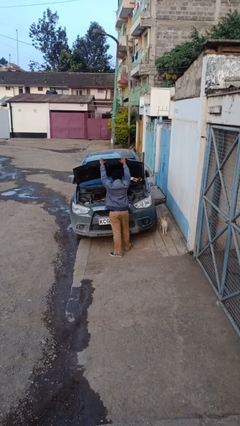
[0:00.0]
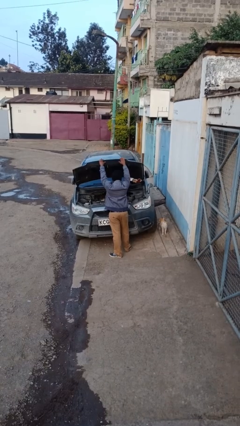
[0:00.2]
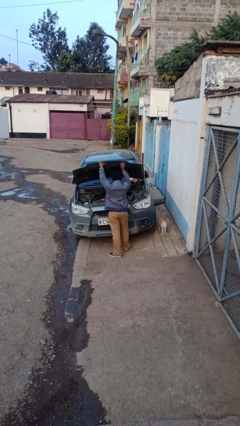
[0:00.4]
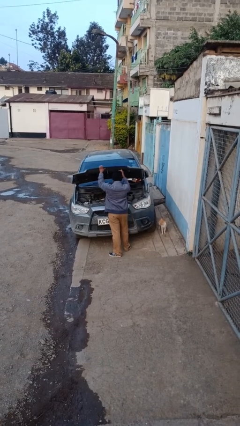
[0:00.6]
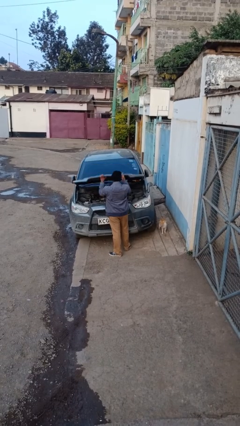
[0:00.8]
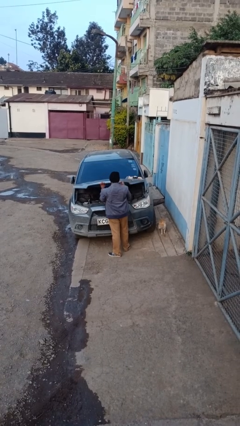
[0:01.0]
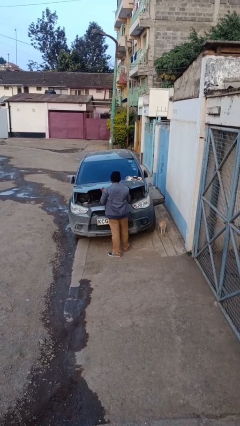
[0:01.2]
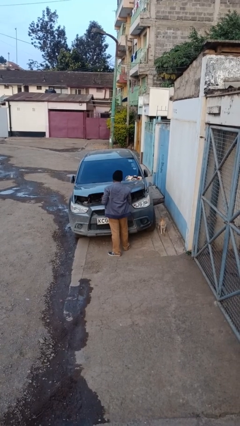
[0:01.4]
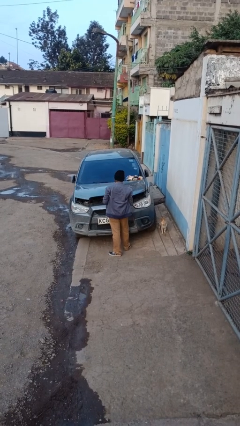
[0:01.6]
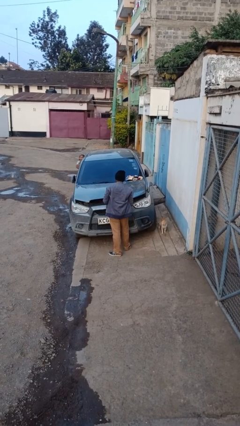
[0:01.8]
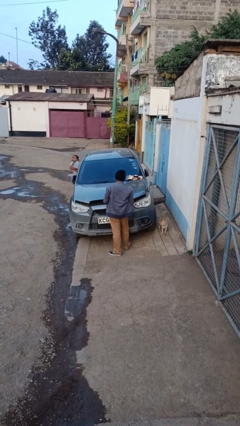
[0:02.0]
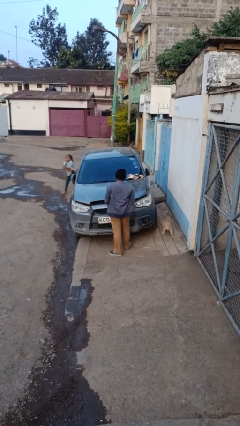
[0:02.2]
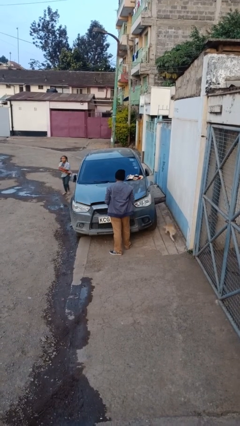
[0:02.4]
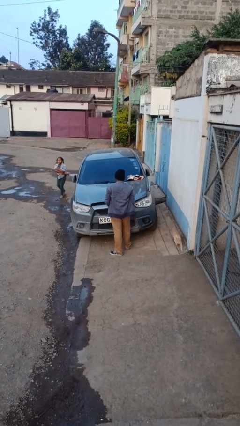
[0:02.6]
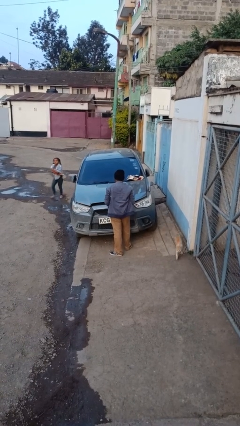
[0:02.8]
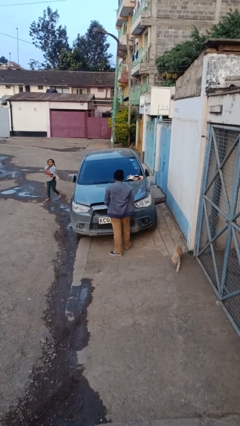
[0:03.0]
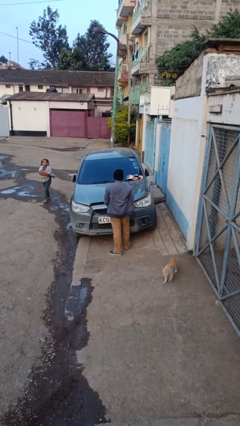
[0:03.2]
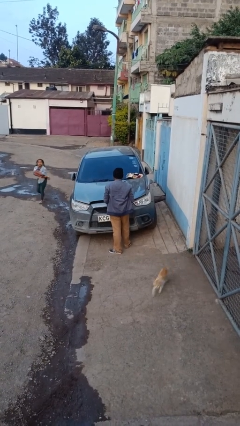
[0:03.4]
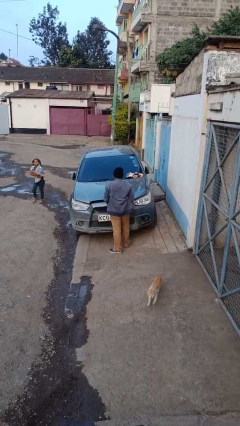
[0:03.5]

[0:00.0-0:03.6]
person closes car hood

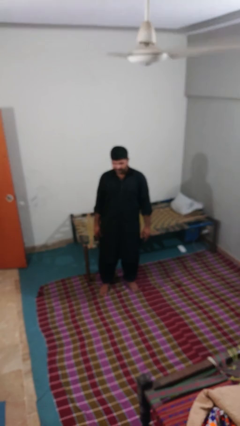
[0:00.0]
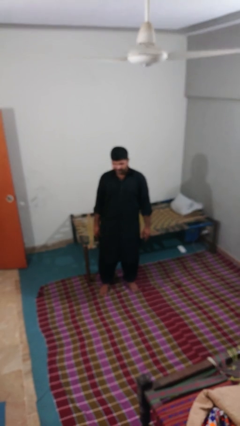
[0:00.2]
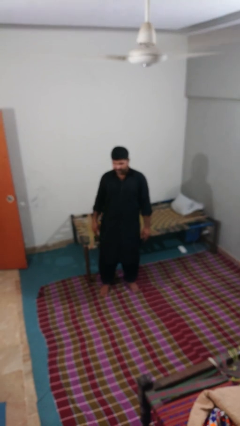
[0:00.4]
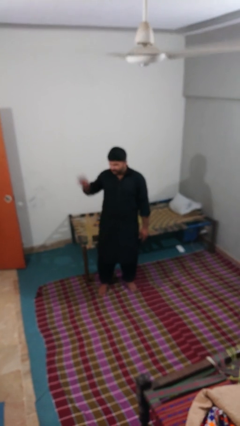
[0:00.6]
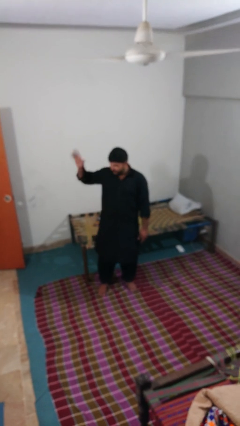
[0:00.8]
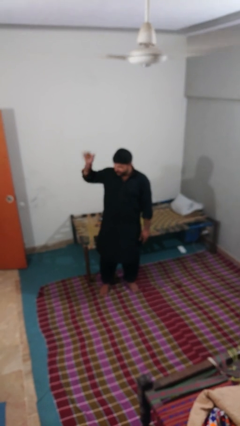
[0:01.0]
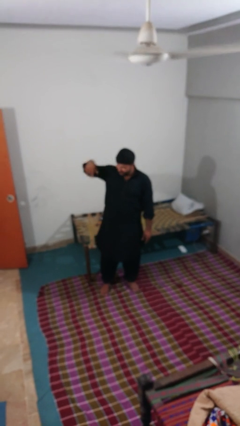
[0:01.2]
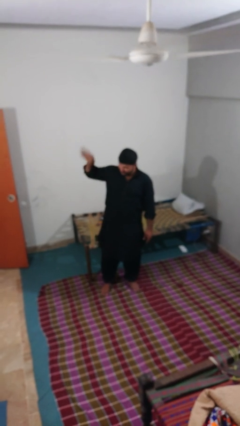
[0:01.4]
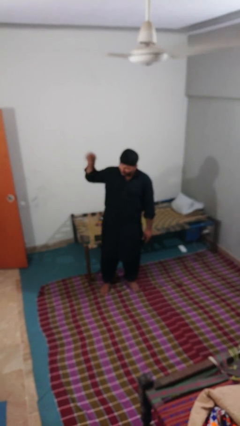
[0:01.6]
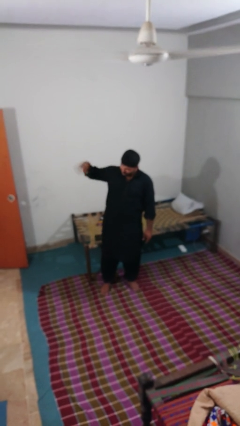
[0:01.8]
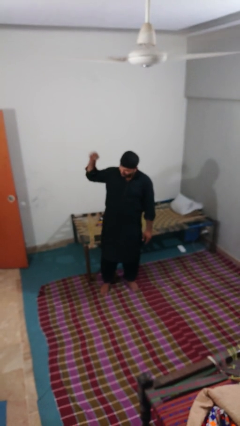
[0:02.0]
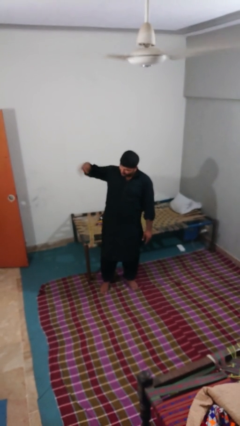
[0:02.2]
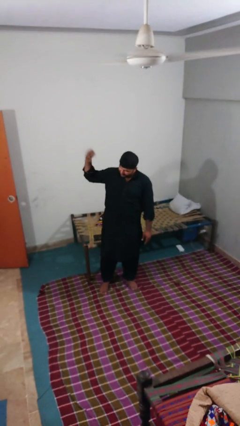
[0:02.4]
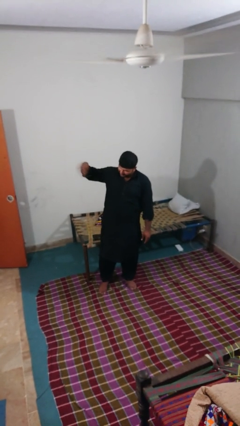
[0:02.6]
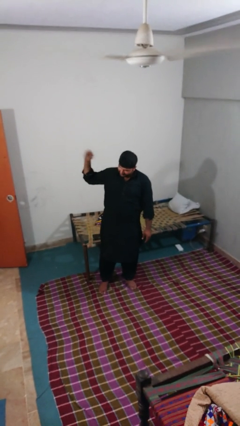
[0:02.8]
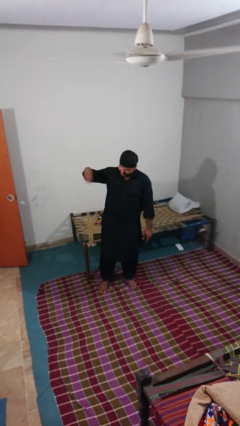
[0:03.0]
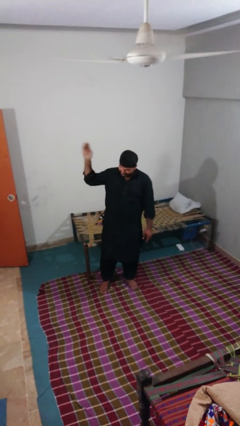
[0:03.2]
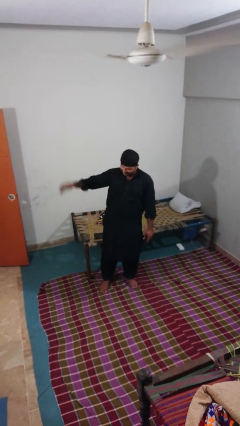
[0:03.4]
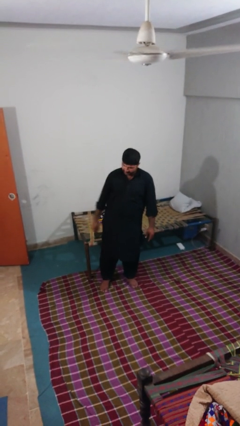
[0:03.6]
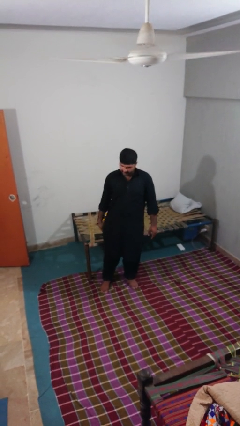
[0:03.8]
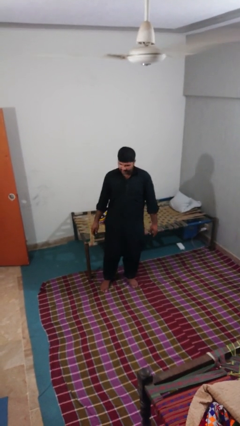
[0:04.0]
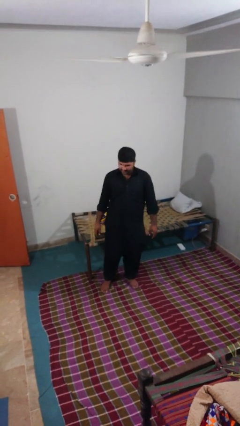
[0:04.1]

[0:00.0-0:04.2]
person gestures come here

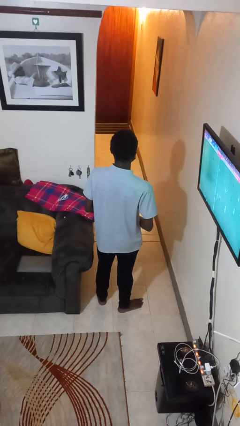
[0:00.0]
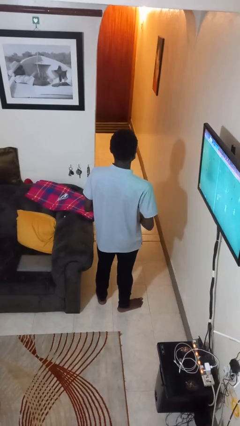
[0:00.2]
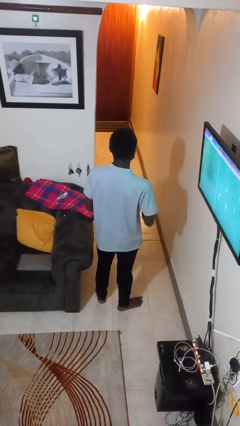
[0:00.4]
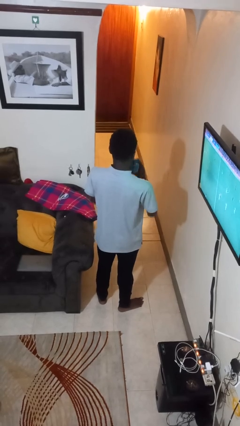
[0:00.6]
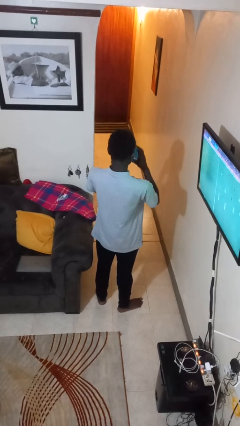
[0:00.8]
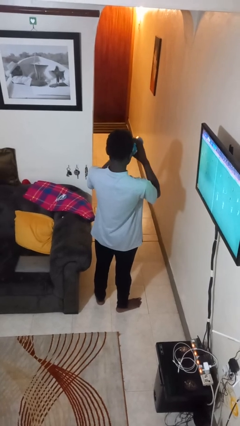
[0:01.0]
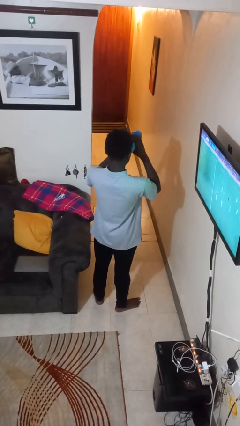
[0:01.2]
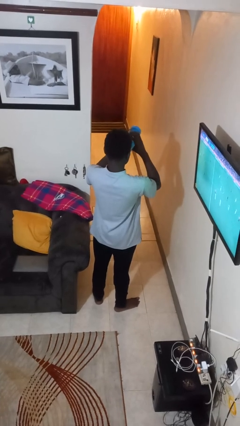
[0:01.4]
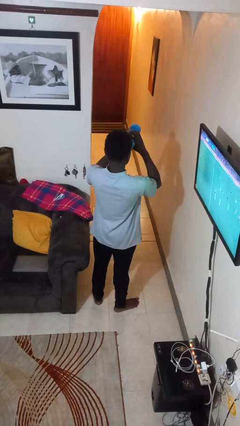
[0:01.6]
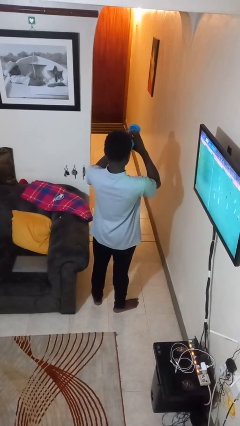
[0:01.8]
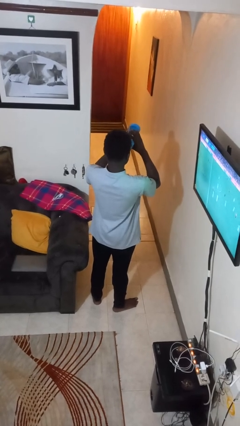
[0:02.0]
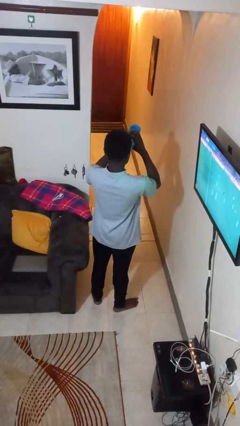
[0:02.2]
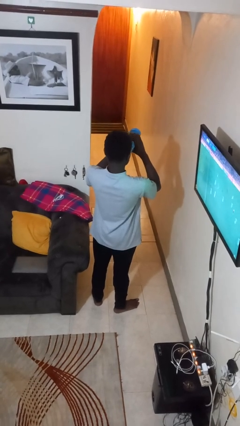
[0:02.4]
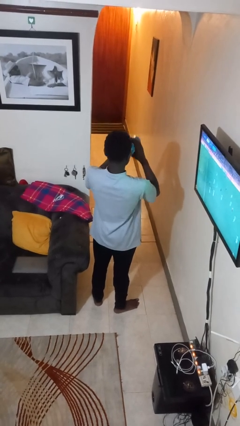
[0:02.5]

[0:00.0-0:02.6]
person drinks from bottle

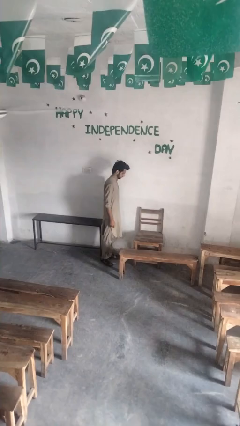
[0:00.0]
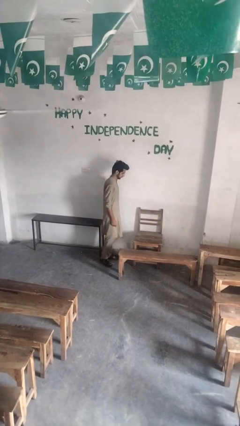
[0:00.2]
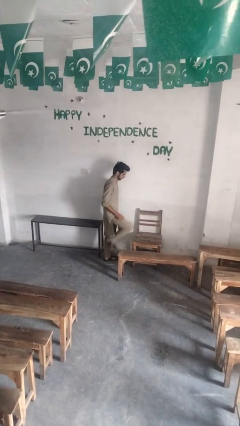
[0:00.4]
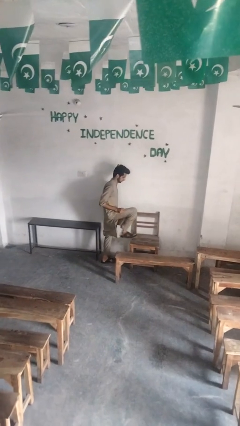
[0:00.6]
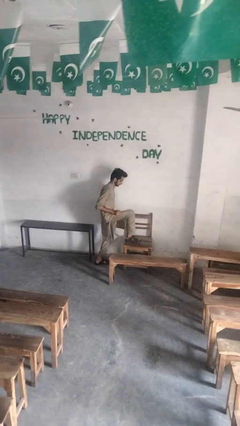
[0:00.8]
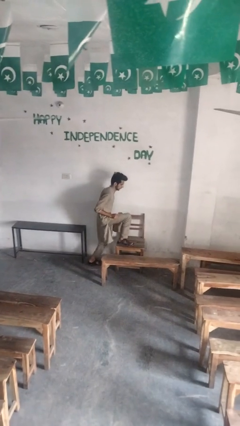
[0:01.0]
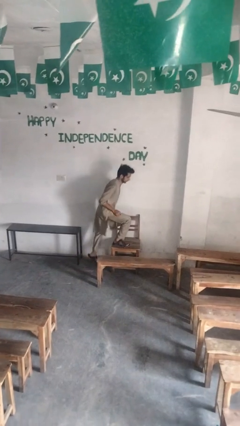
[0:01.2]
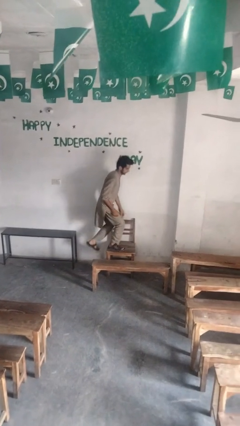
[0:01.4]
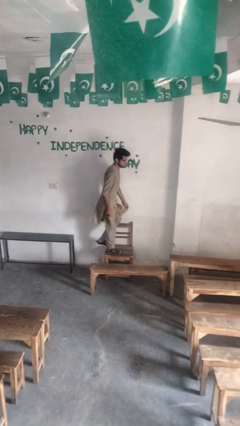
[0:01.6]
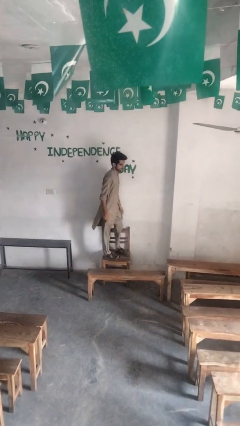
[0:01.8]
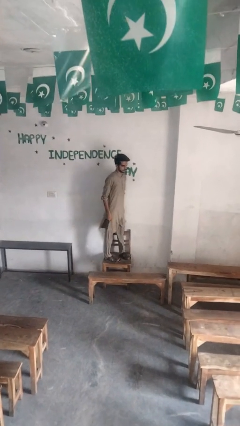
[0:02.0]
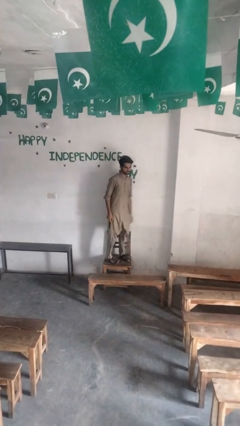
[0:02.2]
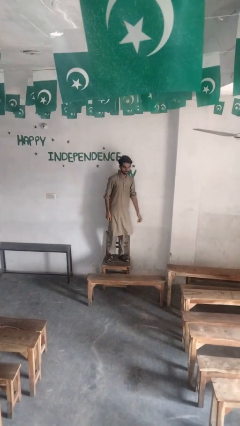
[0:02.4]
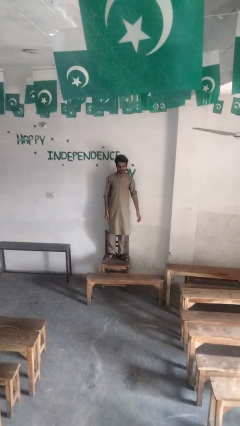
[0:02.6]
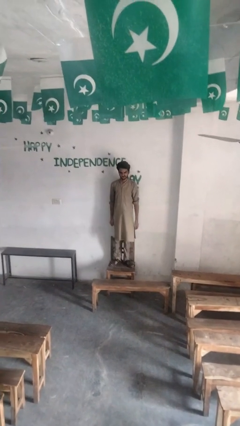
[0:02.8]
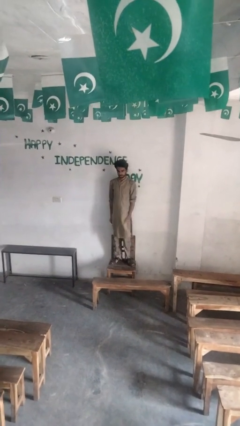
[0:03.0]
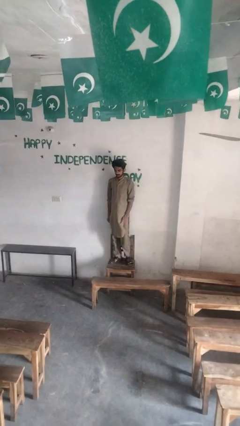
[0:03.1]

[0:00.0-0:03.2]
person climbs on chair

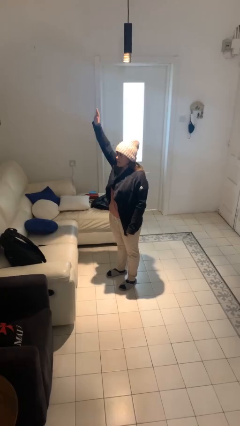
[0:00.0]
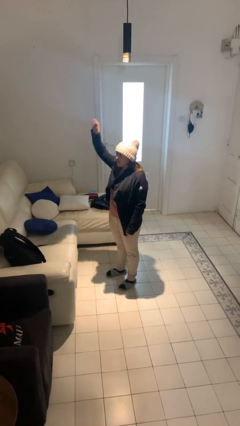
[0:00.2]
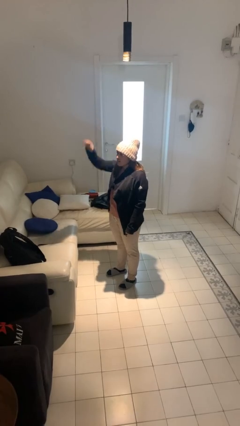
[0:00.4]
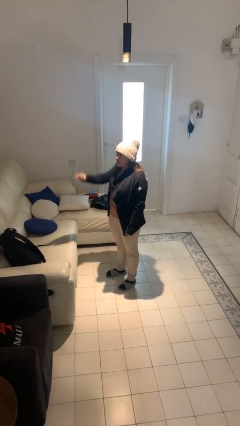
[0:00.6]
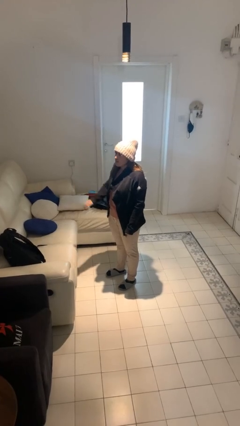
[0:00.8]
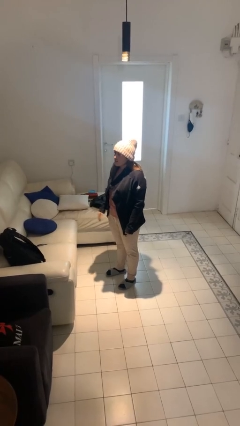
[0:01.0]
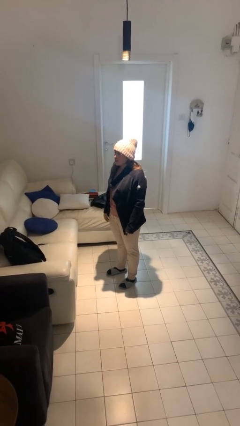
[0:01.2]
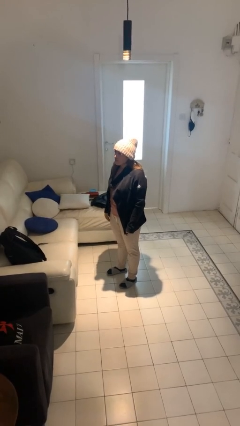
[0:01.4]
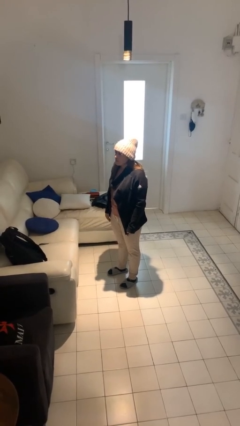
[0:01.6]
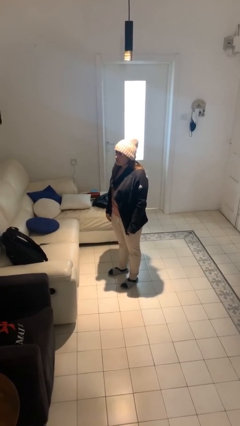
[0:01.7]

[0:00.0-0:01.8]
person gestures lower hand

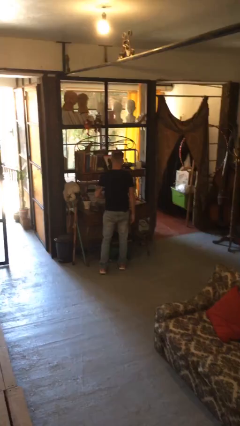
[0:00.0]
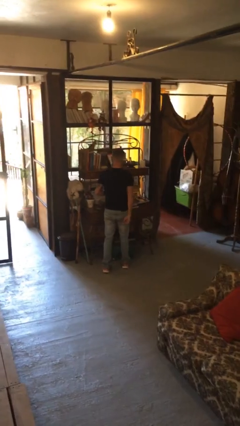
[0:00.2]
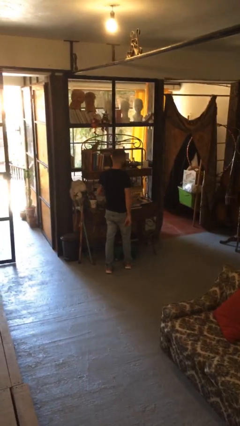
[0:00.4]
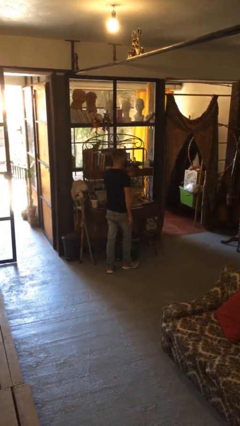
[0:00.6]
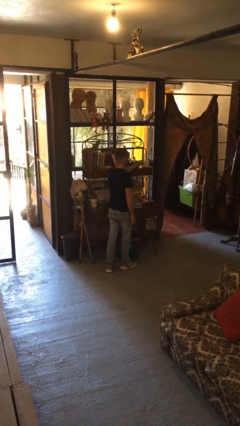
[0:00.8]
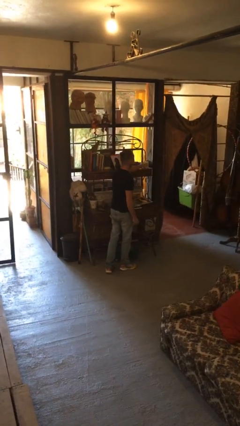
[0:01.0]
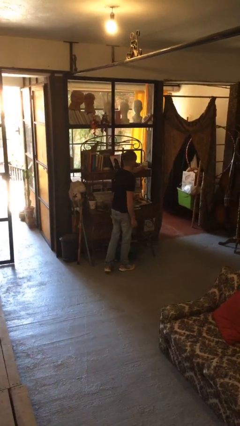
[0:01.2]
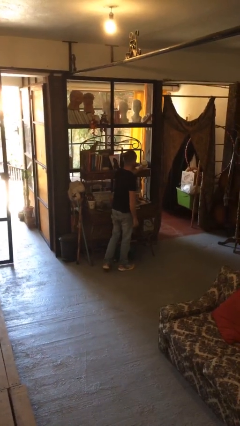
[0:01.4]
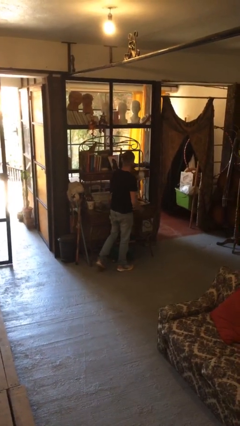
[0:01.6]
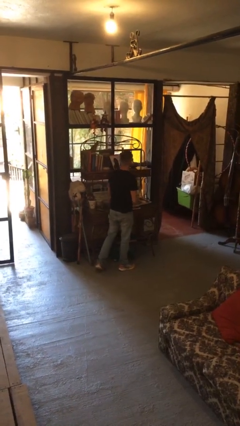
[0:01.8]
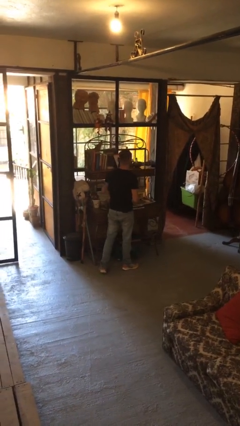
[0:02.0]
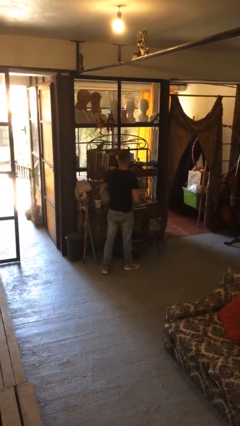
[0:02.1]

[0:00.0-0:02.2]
person picks up object from countertop
